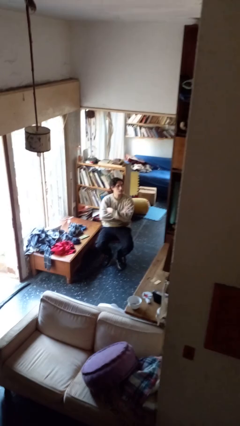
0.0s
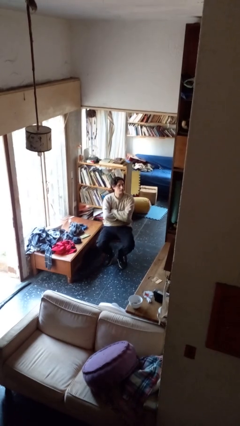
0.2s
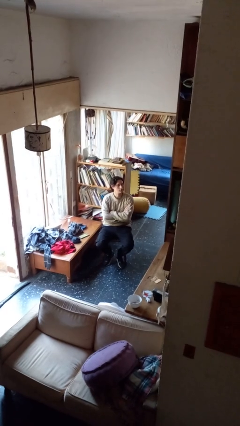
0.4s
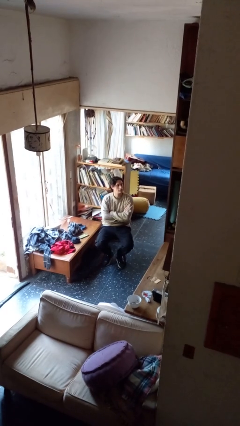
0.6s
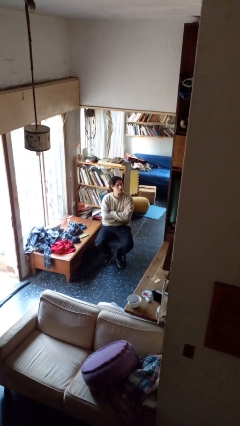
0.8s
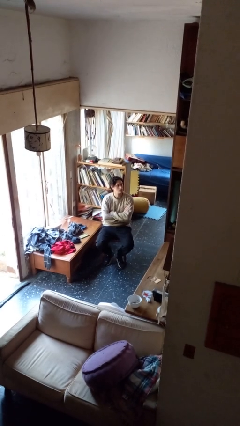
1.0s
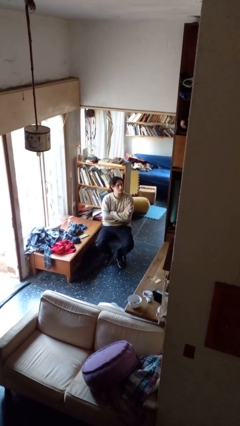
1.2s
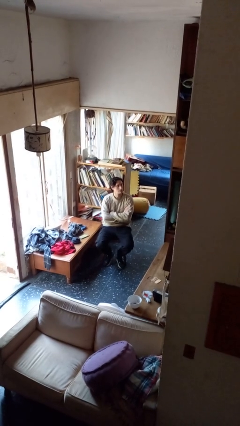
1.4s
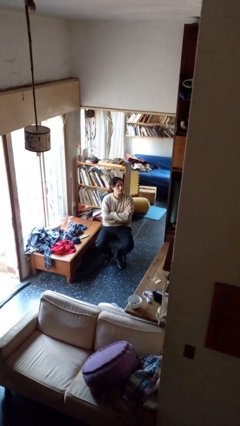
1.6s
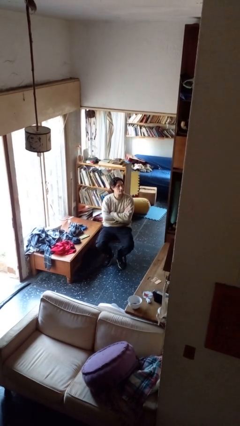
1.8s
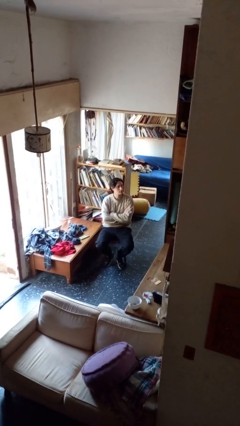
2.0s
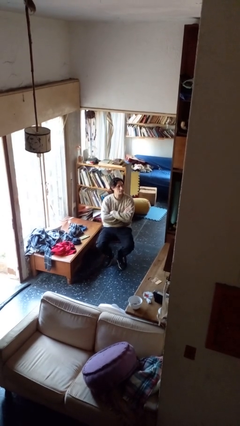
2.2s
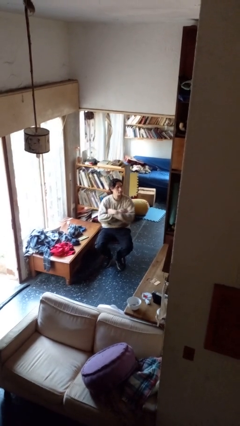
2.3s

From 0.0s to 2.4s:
person crosses arms

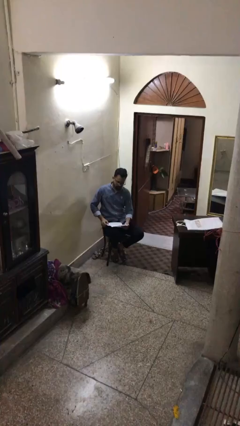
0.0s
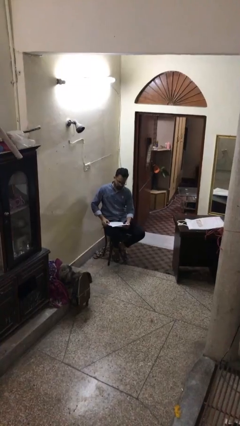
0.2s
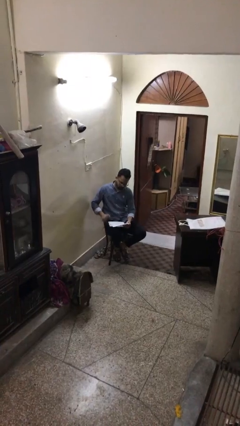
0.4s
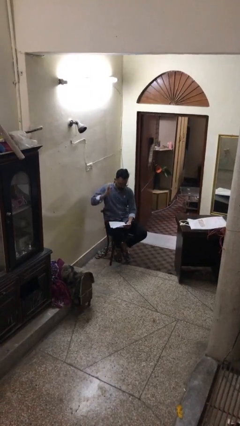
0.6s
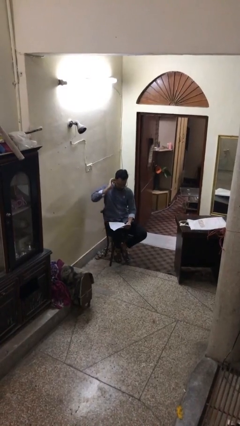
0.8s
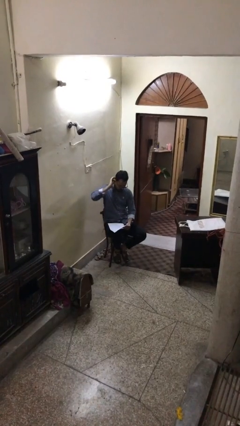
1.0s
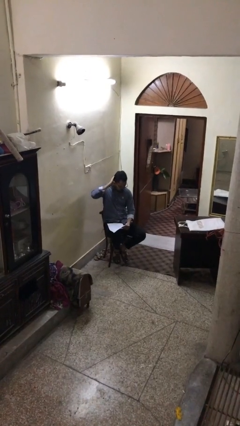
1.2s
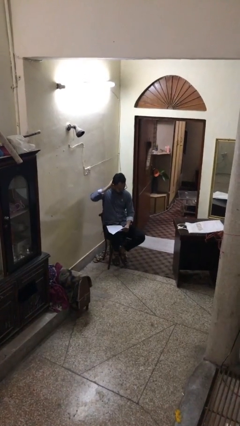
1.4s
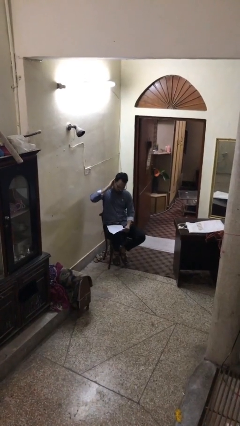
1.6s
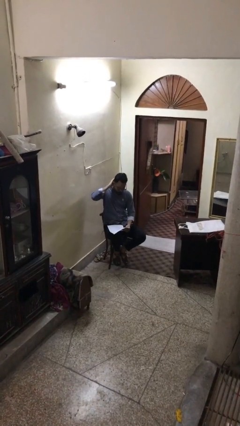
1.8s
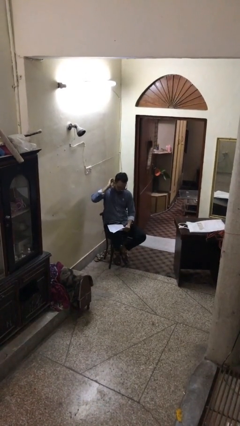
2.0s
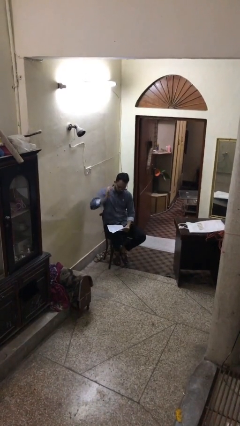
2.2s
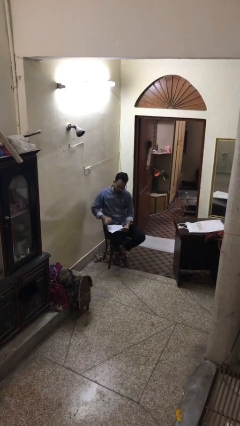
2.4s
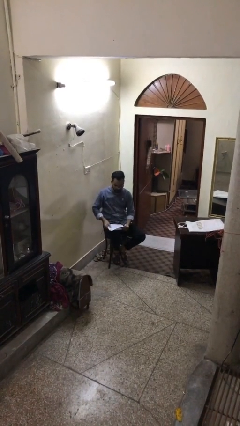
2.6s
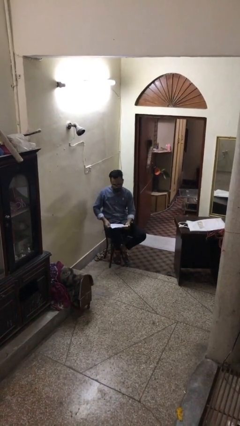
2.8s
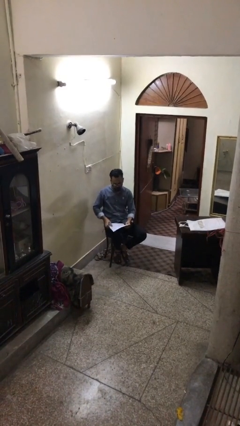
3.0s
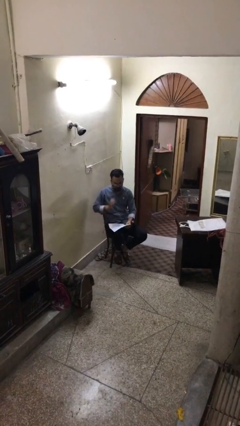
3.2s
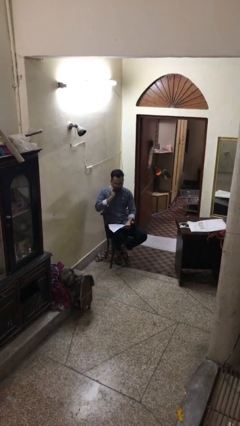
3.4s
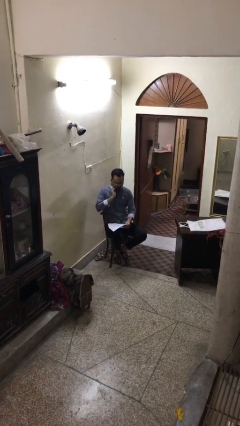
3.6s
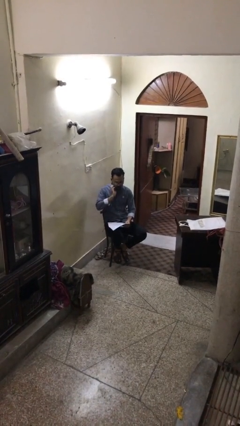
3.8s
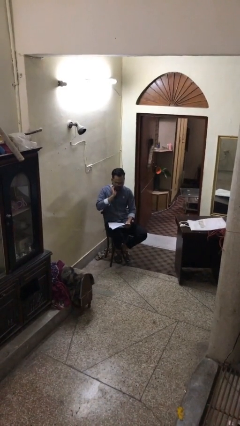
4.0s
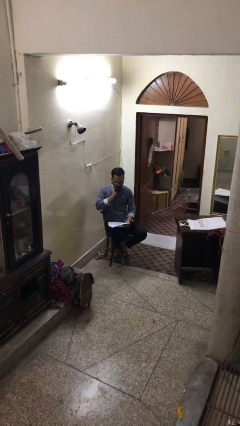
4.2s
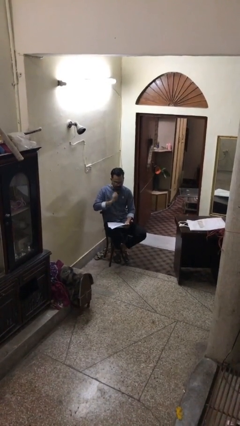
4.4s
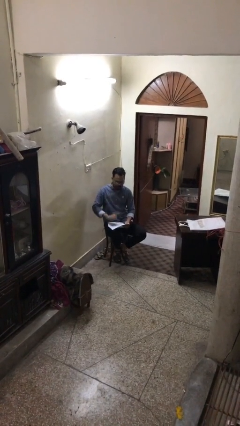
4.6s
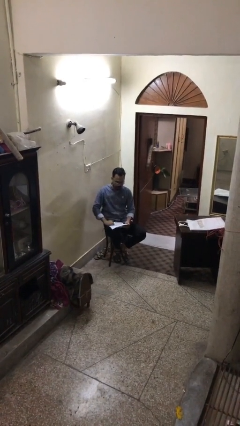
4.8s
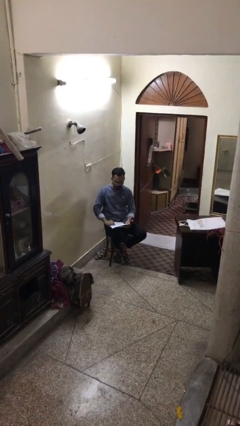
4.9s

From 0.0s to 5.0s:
person reads document

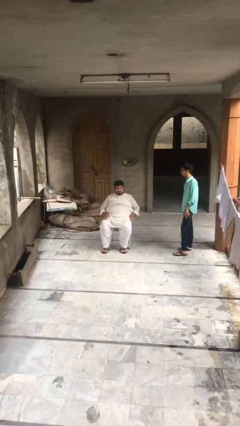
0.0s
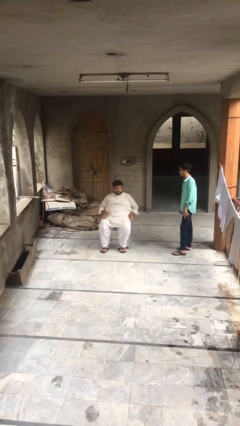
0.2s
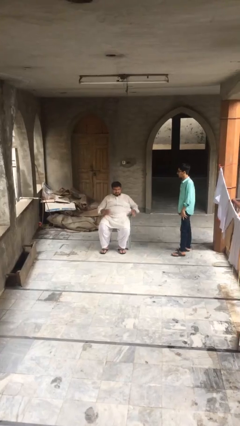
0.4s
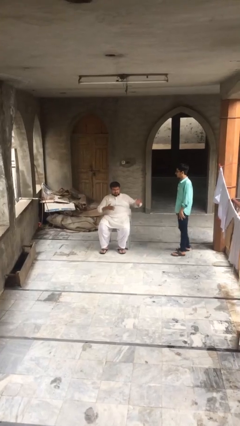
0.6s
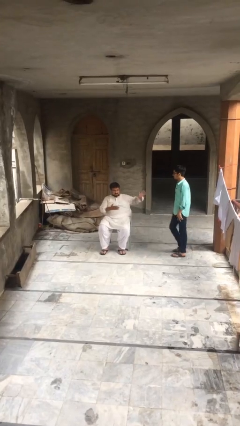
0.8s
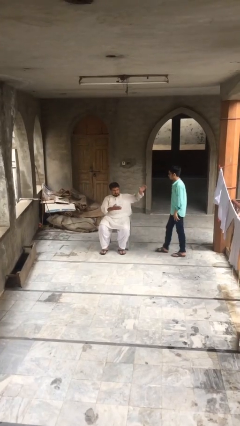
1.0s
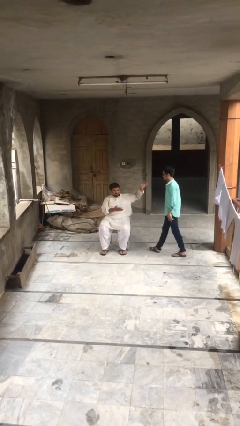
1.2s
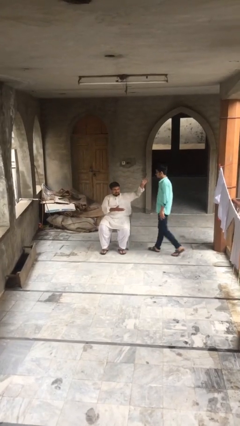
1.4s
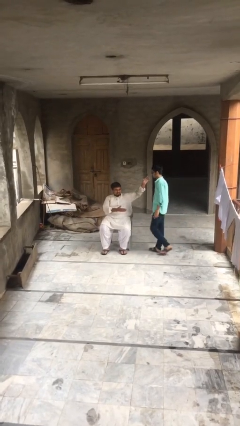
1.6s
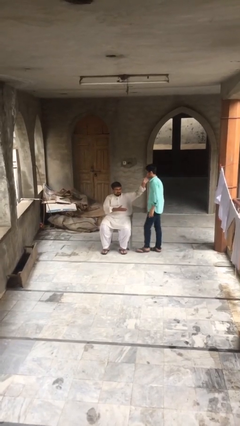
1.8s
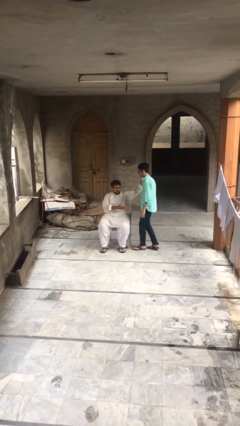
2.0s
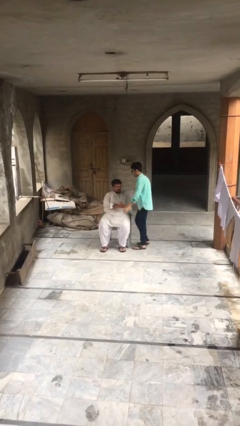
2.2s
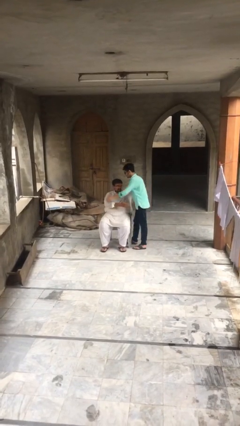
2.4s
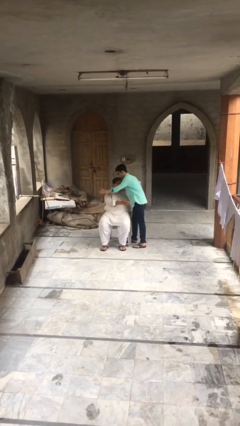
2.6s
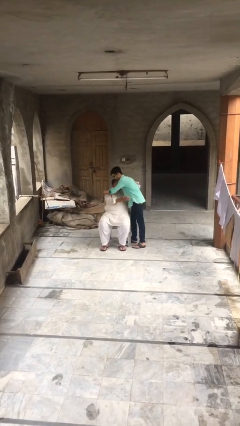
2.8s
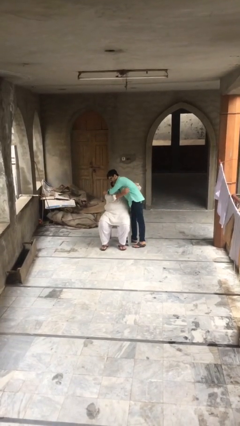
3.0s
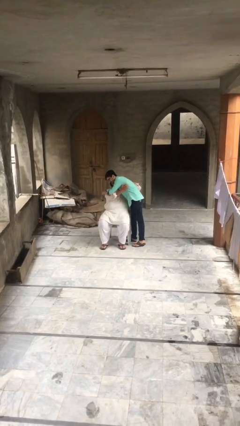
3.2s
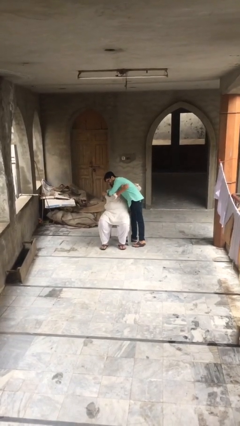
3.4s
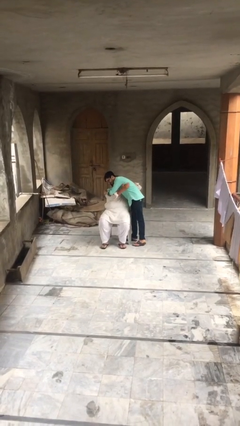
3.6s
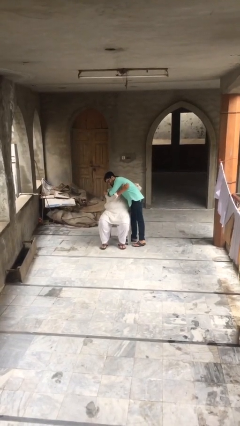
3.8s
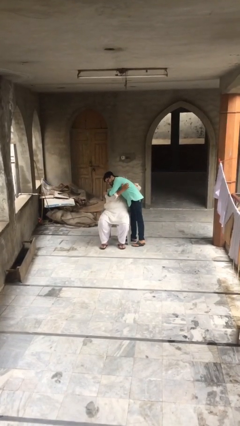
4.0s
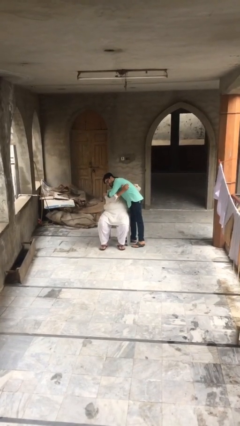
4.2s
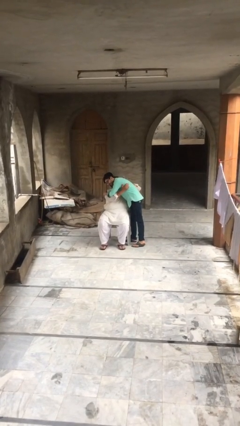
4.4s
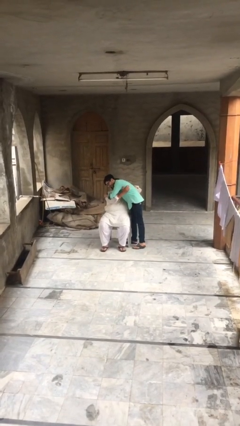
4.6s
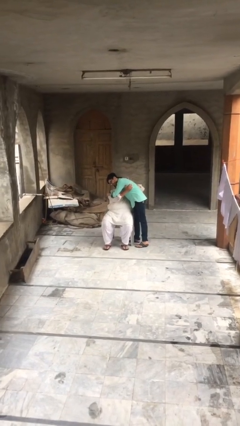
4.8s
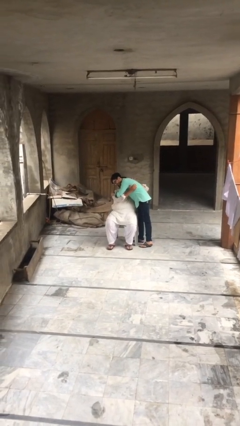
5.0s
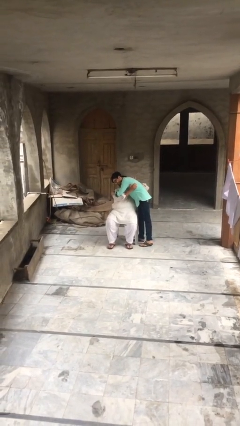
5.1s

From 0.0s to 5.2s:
person embraces person

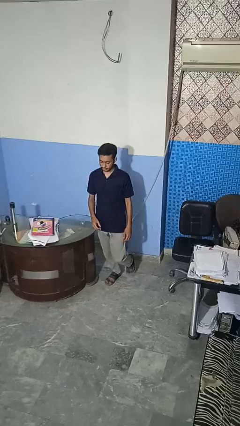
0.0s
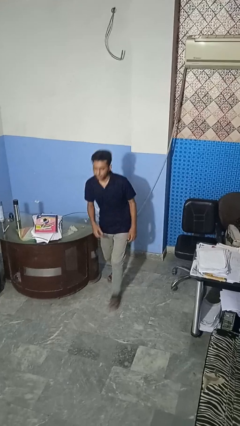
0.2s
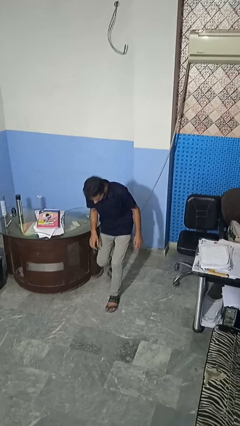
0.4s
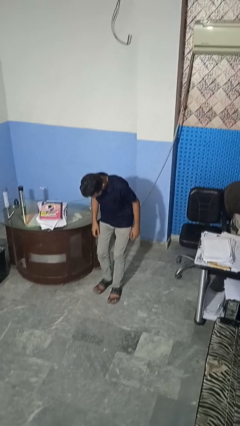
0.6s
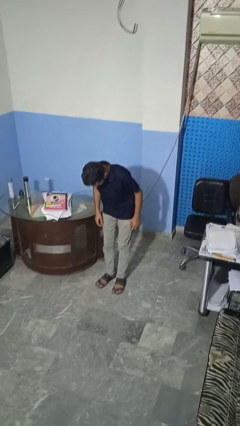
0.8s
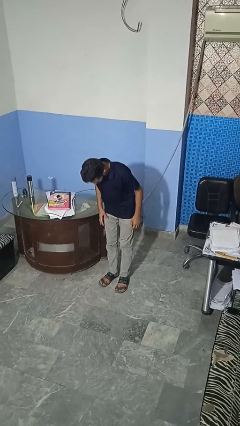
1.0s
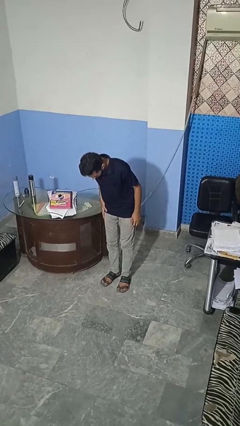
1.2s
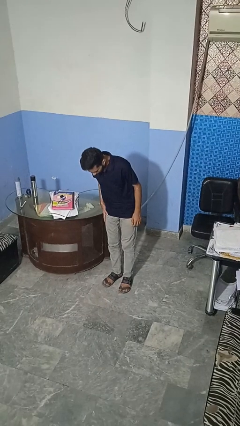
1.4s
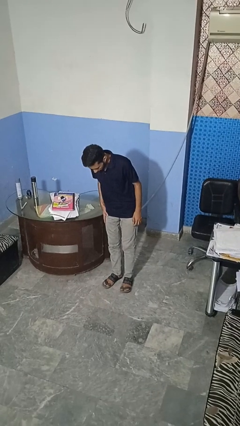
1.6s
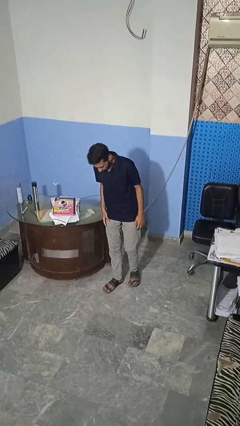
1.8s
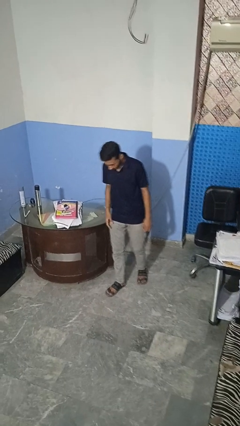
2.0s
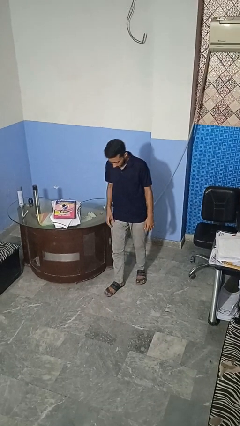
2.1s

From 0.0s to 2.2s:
person bumps into table

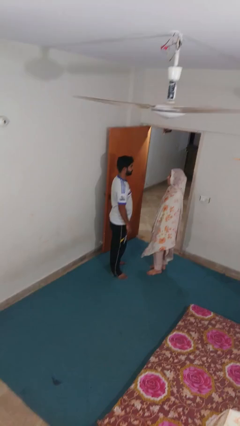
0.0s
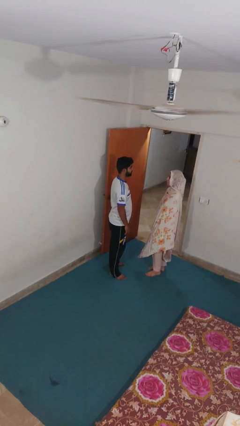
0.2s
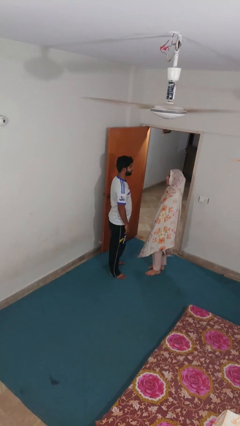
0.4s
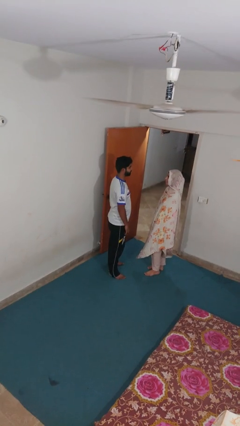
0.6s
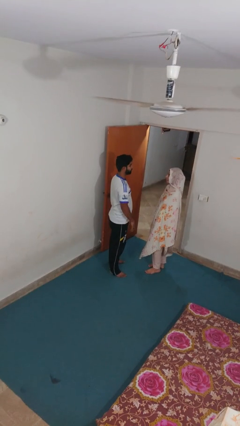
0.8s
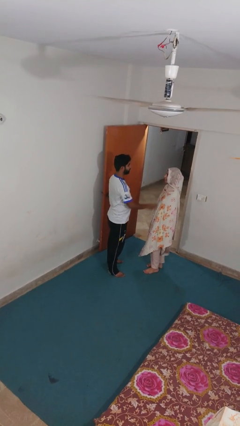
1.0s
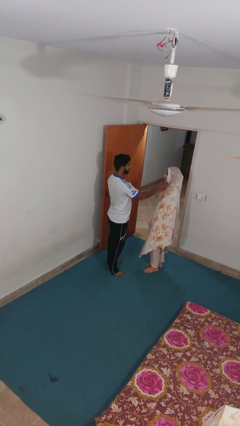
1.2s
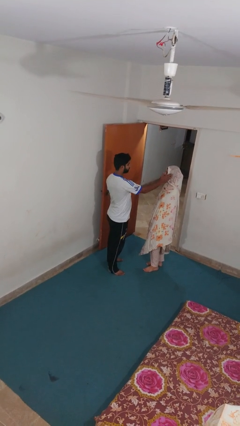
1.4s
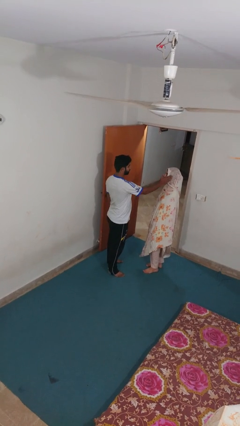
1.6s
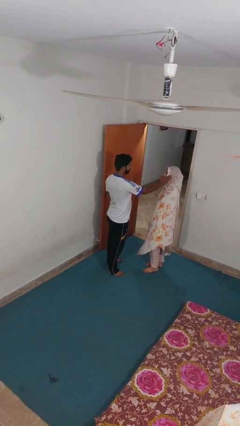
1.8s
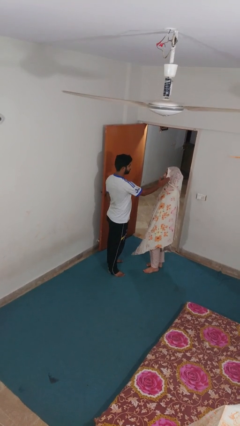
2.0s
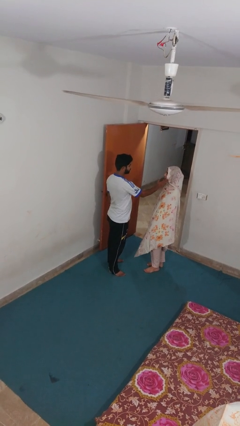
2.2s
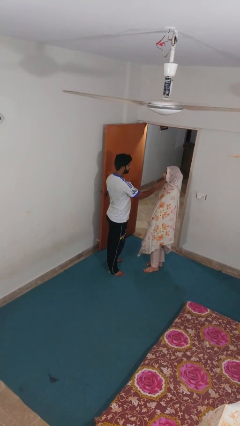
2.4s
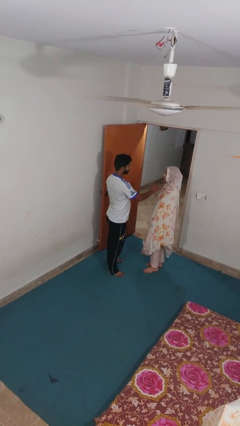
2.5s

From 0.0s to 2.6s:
person touches face of person
